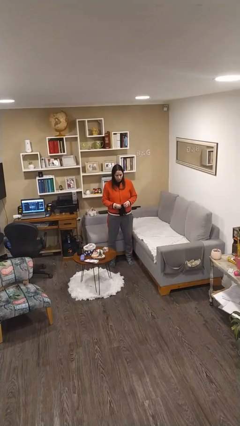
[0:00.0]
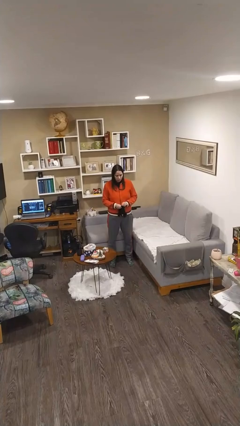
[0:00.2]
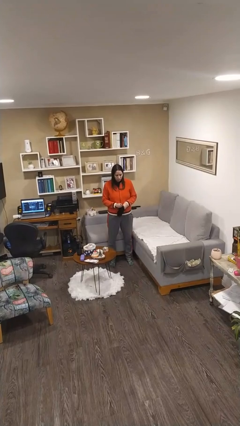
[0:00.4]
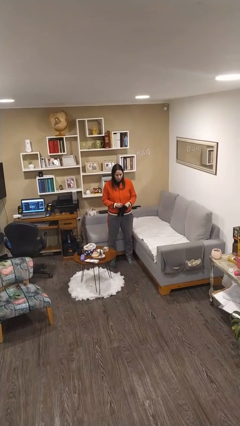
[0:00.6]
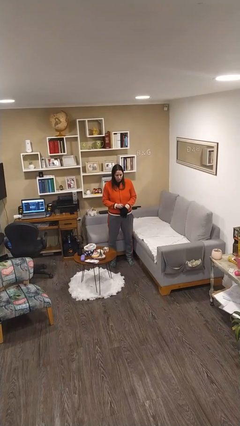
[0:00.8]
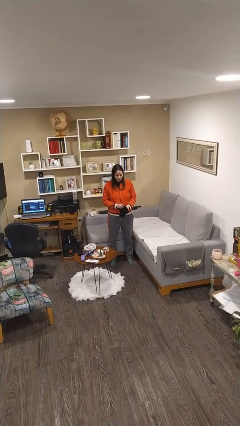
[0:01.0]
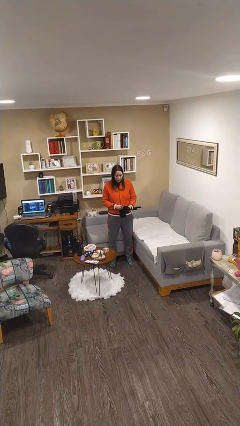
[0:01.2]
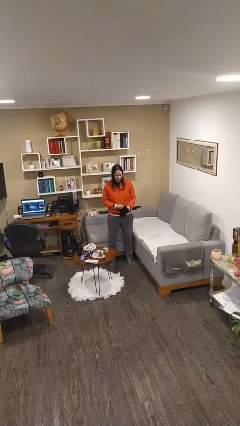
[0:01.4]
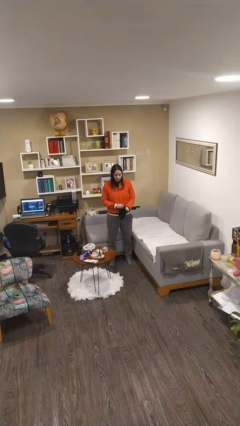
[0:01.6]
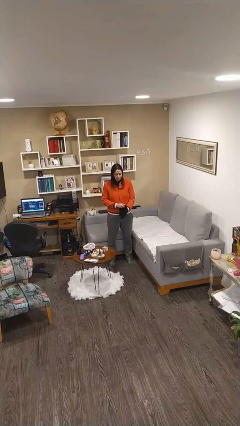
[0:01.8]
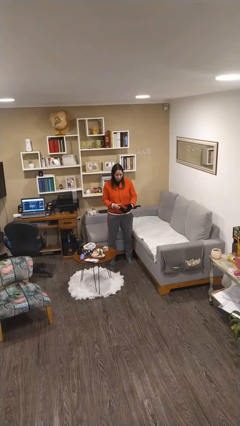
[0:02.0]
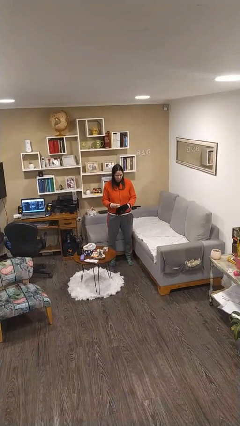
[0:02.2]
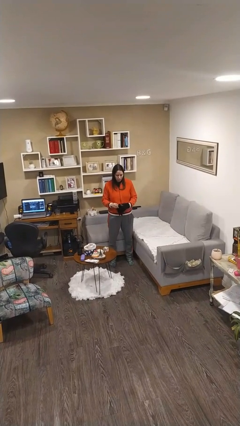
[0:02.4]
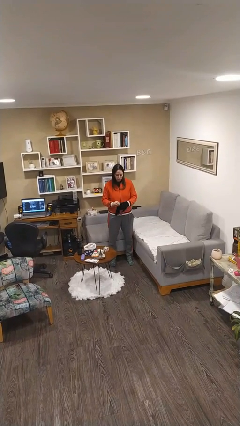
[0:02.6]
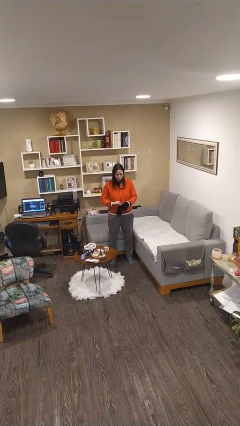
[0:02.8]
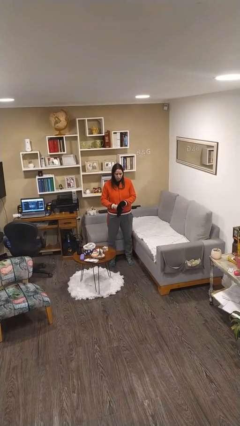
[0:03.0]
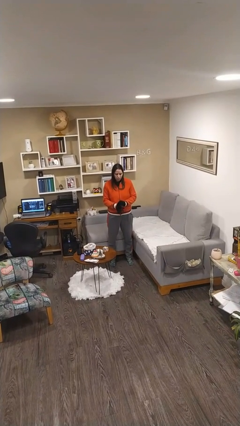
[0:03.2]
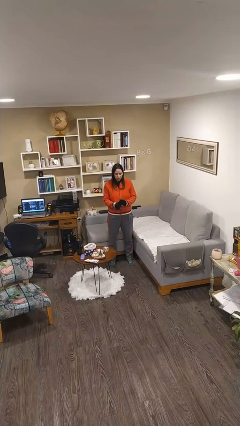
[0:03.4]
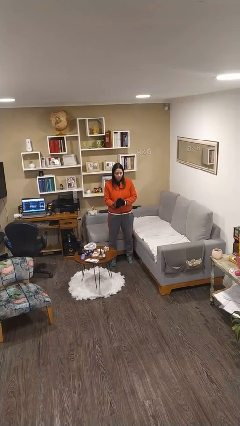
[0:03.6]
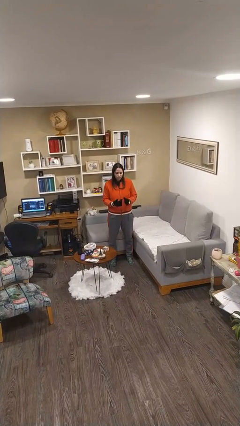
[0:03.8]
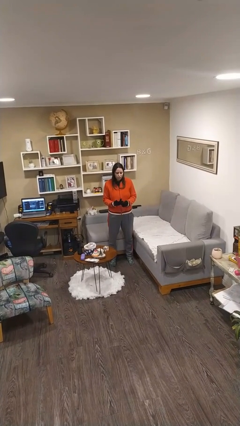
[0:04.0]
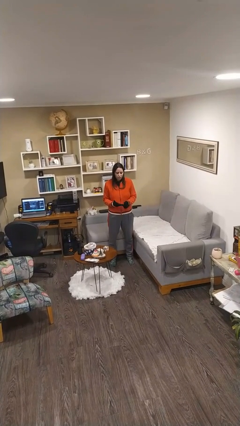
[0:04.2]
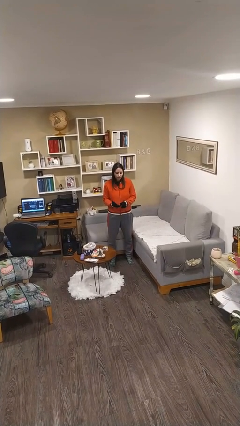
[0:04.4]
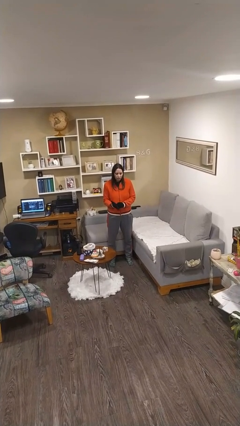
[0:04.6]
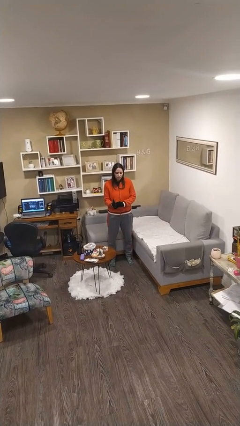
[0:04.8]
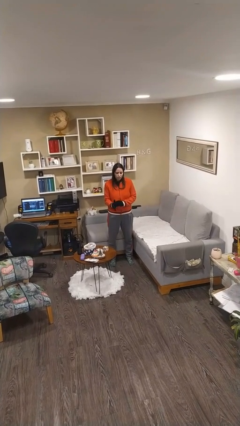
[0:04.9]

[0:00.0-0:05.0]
person puts on gloves

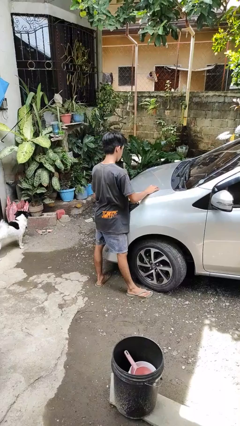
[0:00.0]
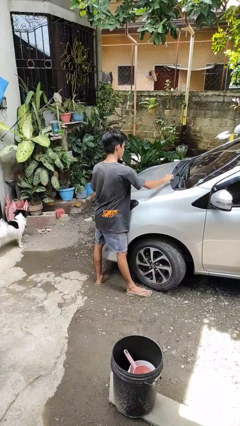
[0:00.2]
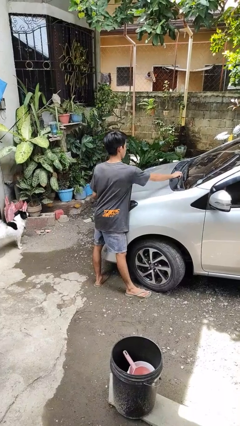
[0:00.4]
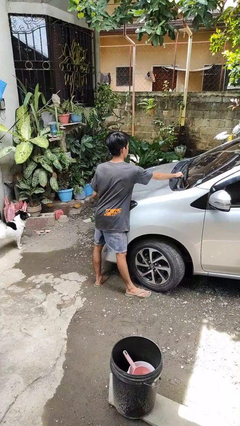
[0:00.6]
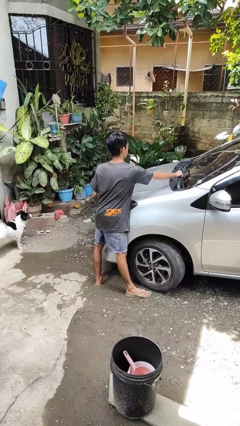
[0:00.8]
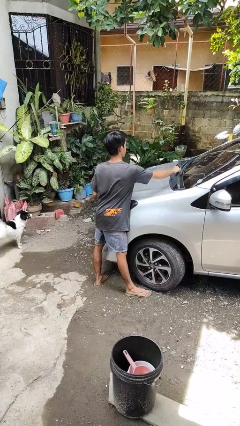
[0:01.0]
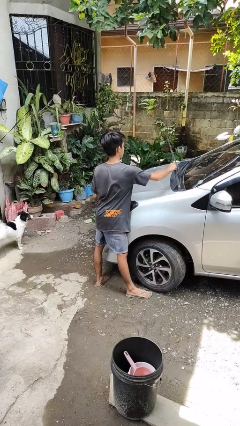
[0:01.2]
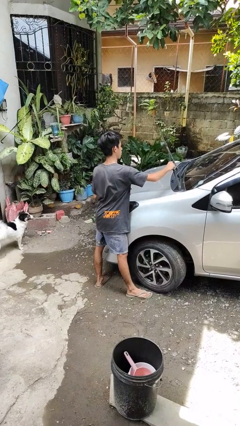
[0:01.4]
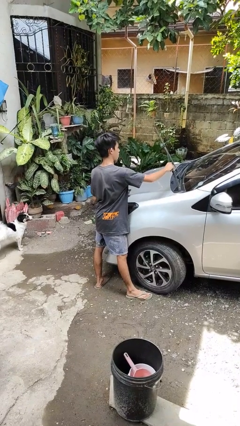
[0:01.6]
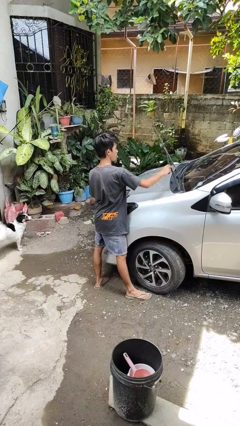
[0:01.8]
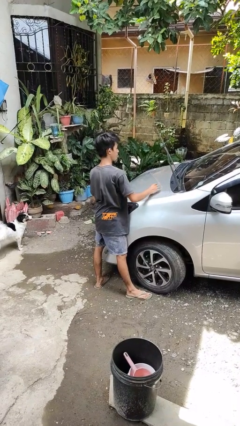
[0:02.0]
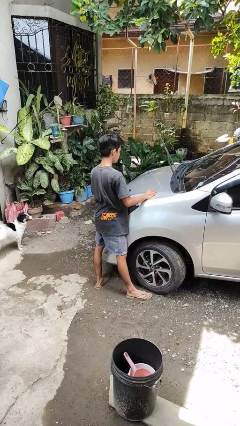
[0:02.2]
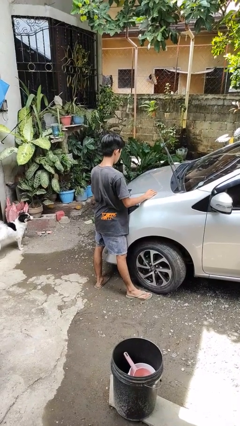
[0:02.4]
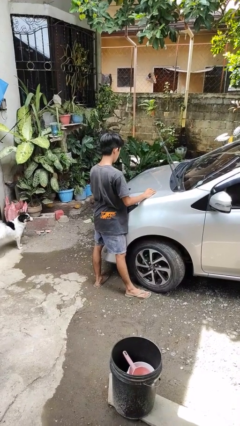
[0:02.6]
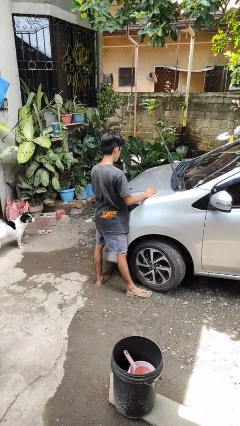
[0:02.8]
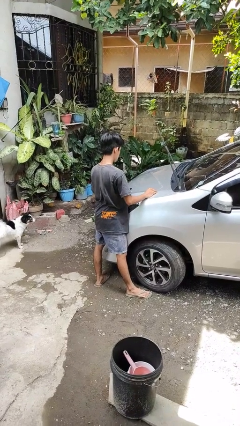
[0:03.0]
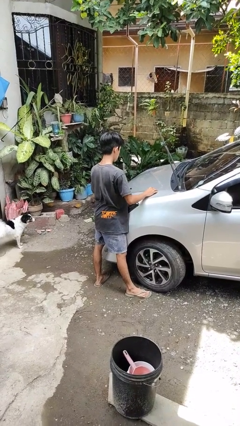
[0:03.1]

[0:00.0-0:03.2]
person flips up car wipers

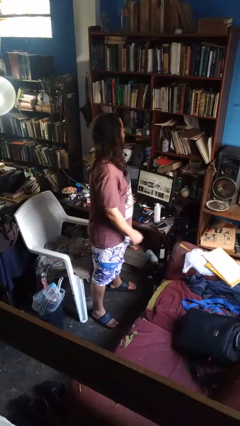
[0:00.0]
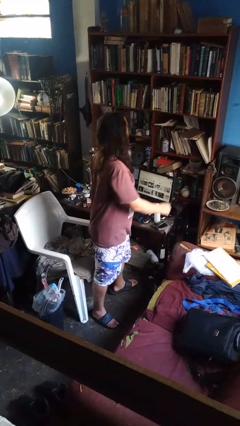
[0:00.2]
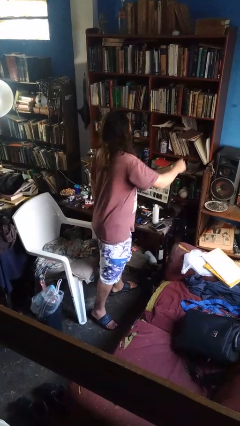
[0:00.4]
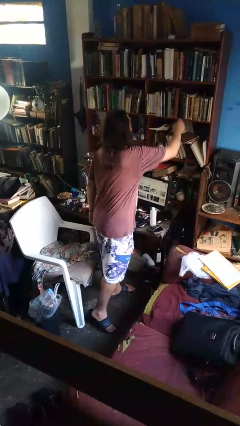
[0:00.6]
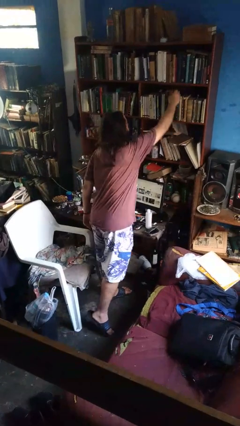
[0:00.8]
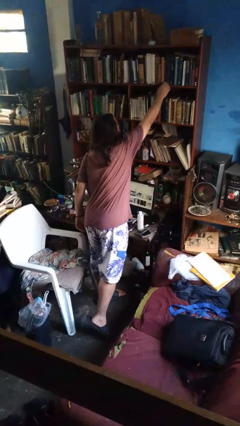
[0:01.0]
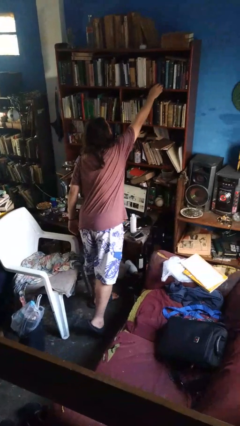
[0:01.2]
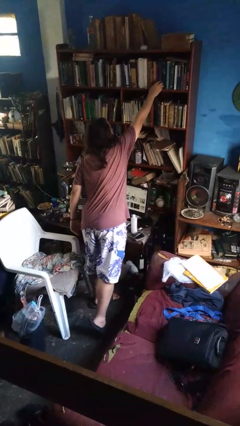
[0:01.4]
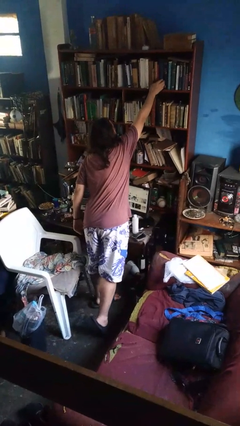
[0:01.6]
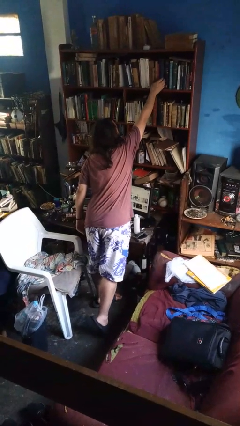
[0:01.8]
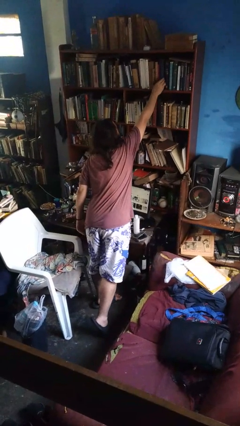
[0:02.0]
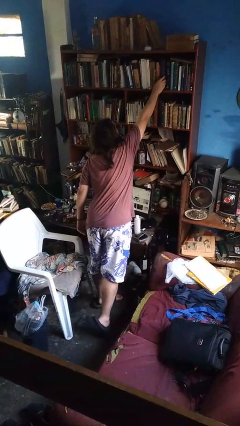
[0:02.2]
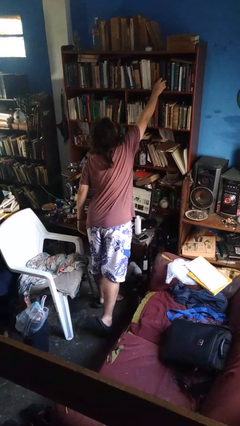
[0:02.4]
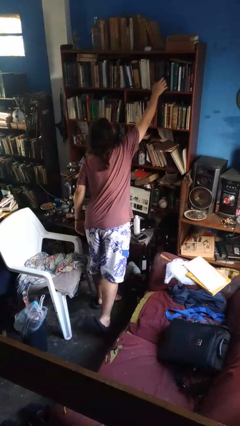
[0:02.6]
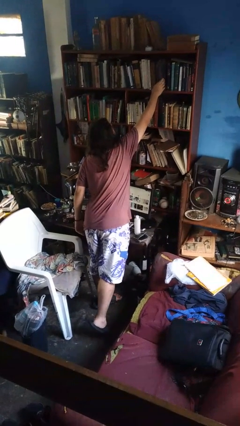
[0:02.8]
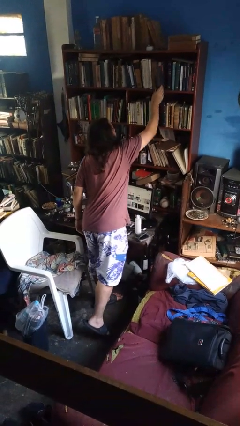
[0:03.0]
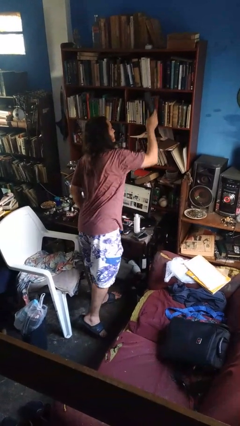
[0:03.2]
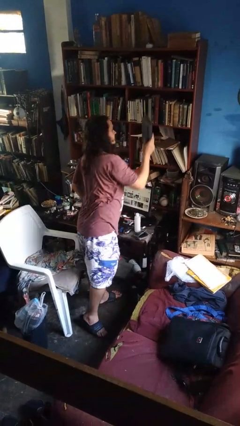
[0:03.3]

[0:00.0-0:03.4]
person picks up object from shelf

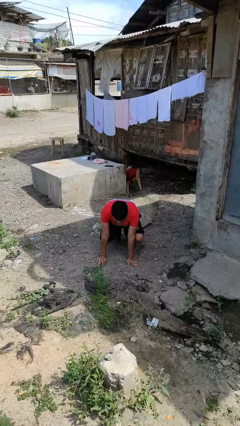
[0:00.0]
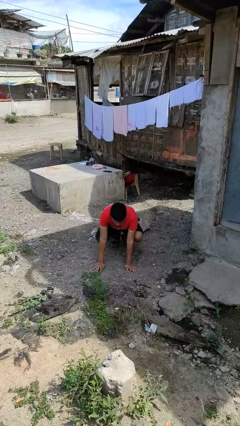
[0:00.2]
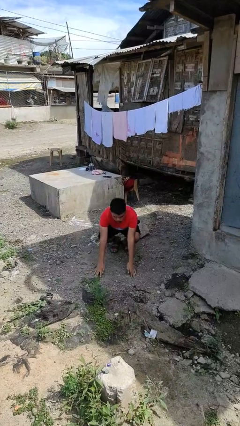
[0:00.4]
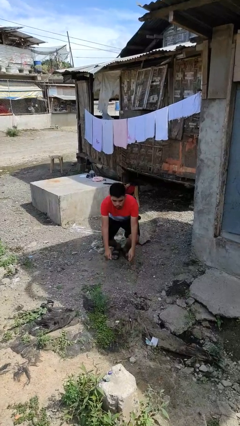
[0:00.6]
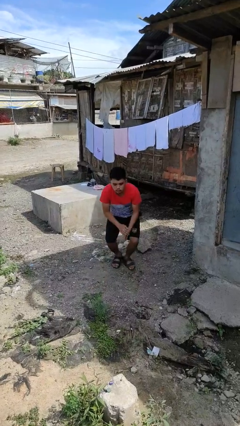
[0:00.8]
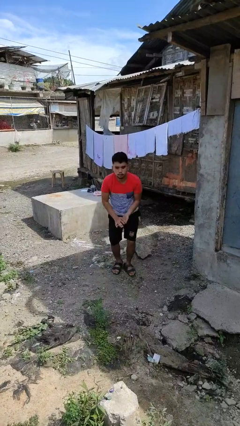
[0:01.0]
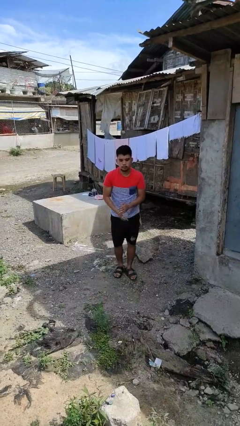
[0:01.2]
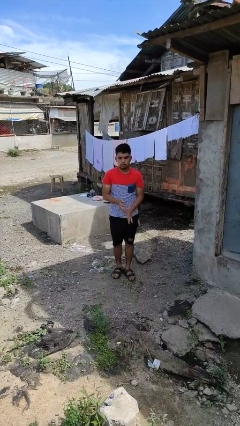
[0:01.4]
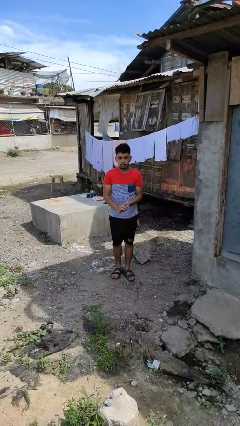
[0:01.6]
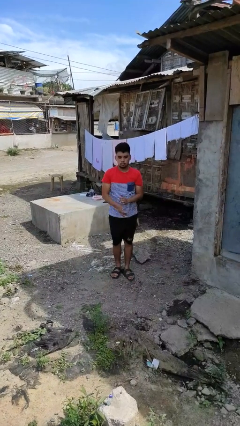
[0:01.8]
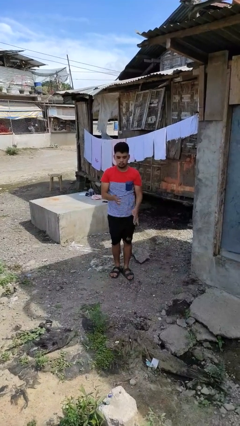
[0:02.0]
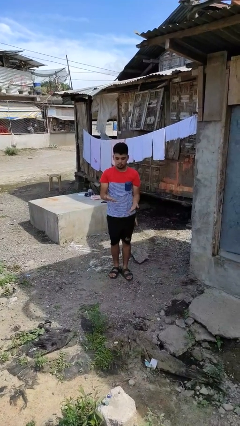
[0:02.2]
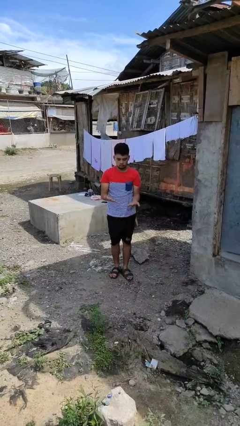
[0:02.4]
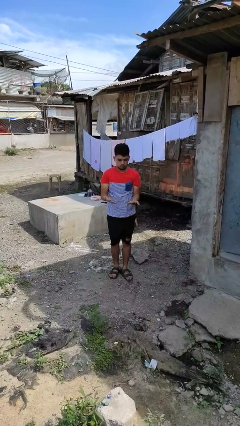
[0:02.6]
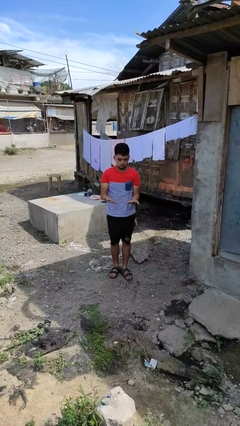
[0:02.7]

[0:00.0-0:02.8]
person stands up from floor

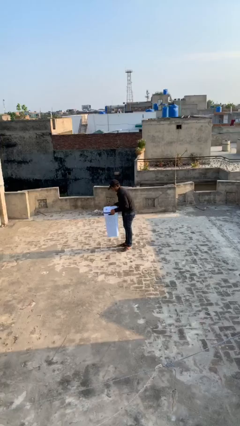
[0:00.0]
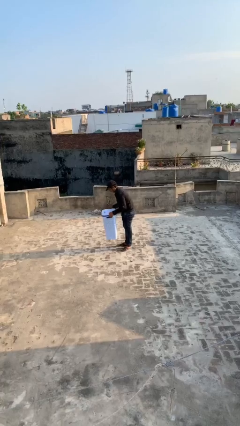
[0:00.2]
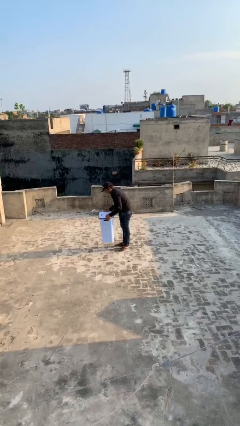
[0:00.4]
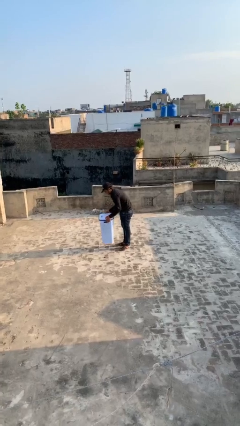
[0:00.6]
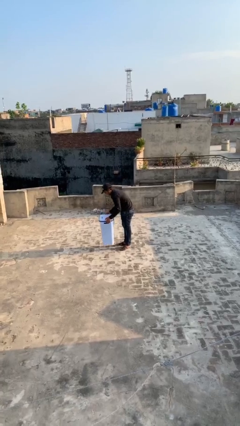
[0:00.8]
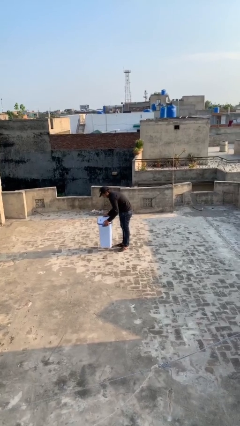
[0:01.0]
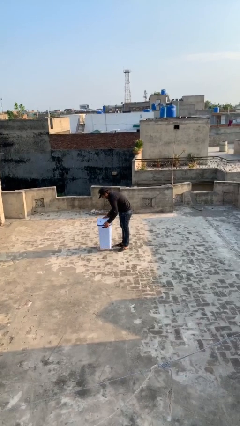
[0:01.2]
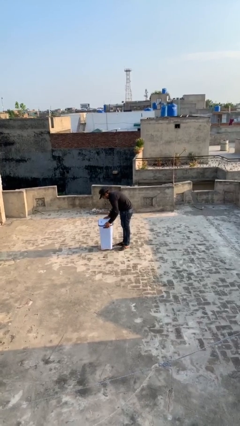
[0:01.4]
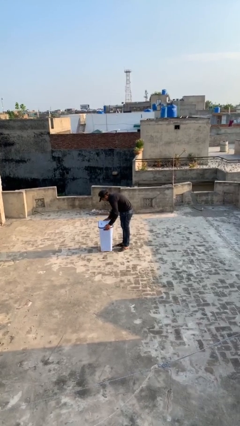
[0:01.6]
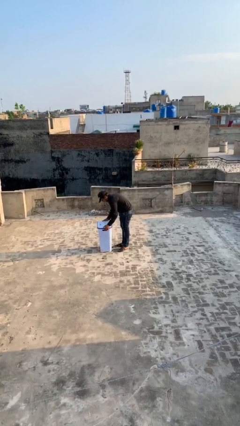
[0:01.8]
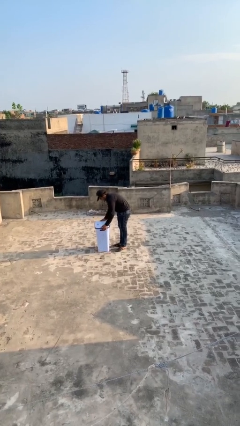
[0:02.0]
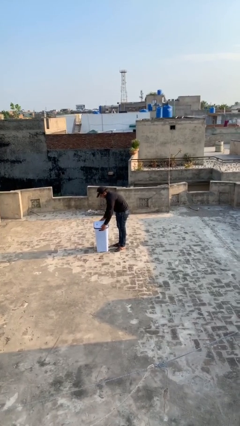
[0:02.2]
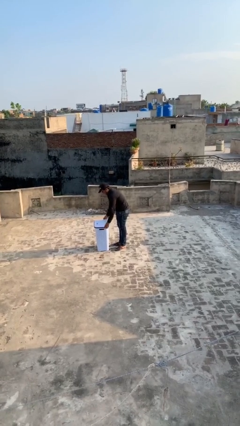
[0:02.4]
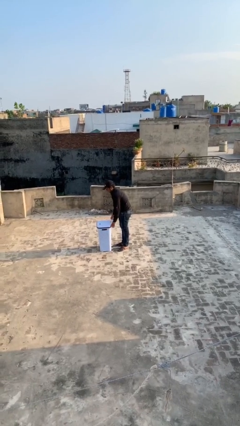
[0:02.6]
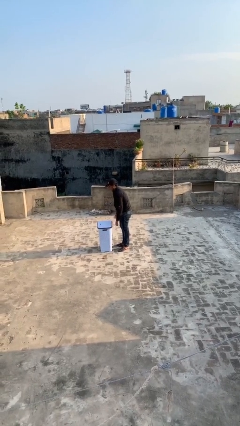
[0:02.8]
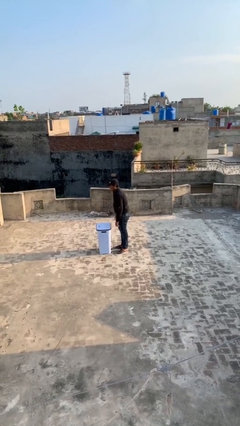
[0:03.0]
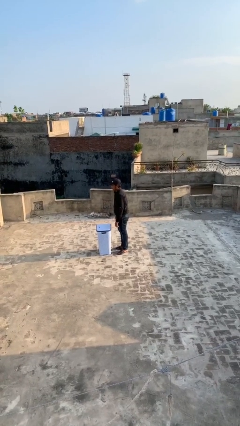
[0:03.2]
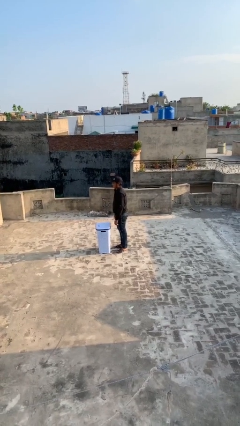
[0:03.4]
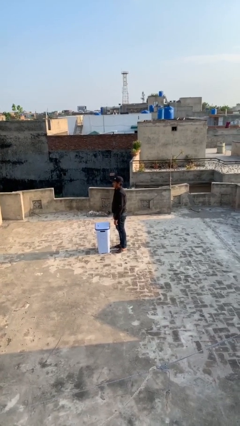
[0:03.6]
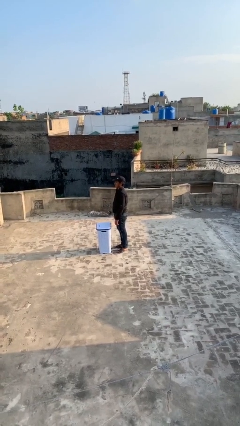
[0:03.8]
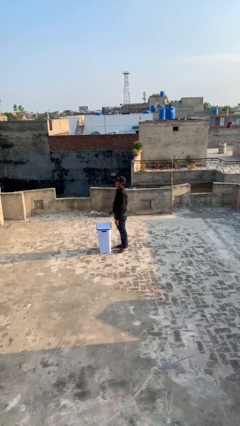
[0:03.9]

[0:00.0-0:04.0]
person puts down object on floor
